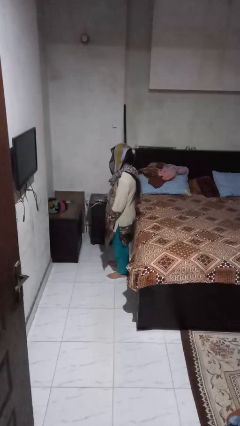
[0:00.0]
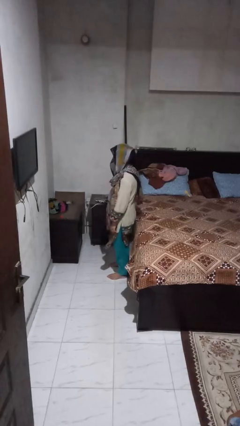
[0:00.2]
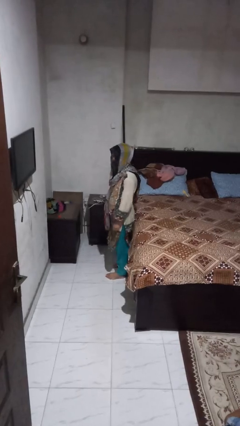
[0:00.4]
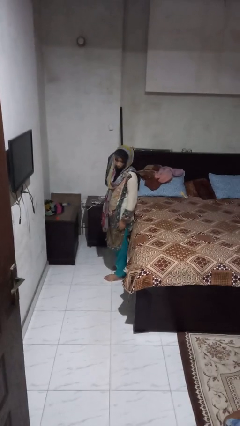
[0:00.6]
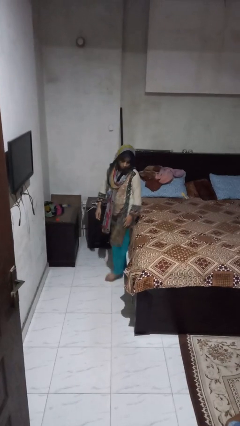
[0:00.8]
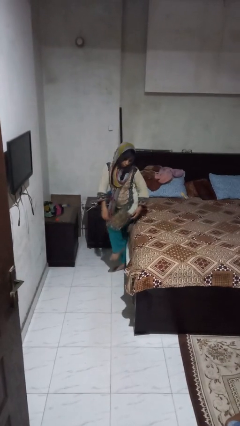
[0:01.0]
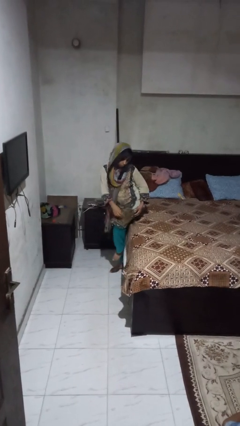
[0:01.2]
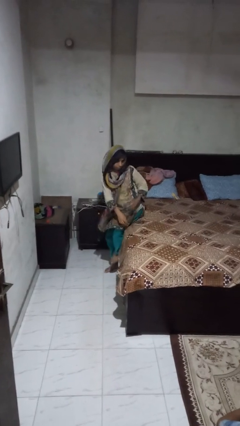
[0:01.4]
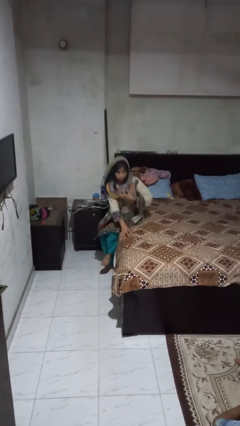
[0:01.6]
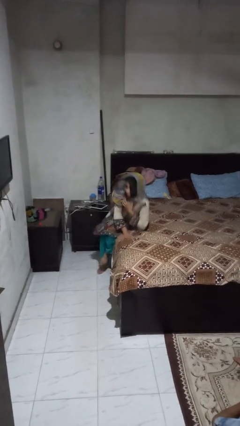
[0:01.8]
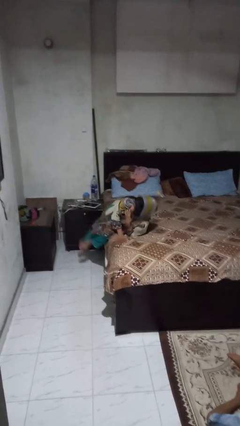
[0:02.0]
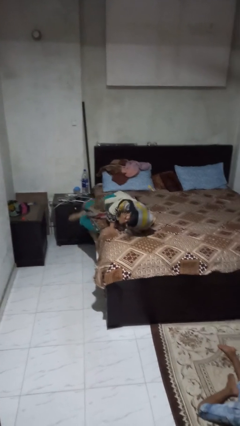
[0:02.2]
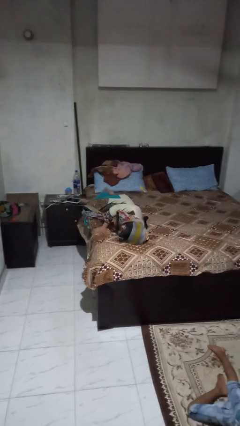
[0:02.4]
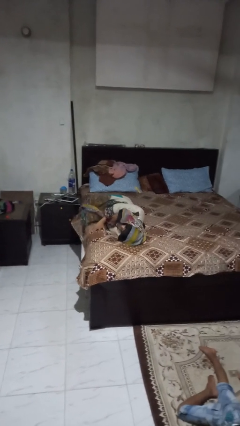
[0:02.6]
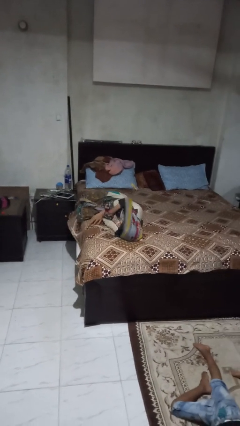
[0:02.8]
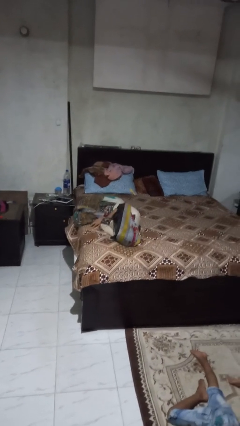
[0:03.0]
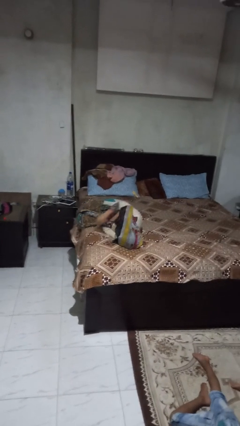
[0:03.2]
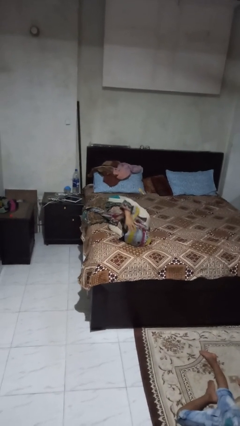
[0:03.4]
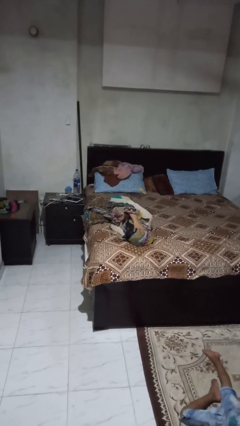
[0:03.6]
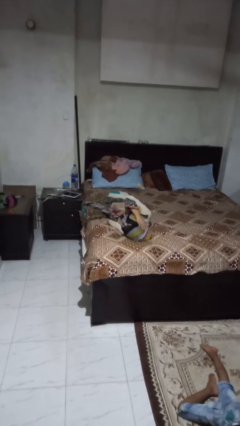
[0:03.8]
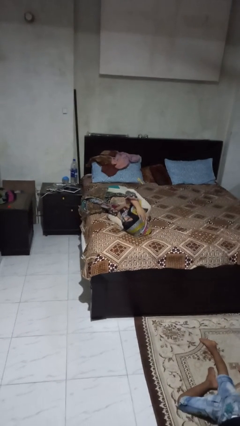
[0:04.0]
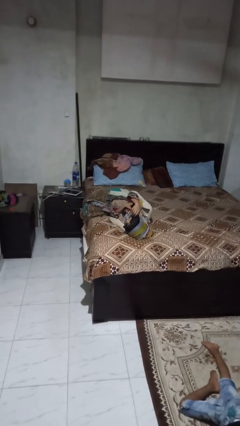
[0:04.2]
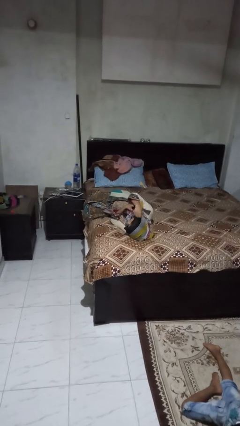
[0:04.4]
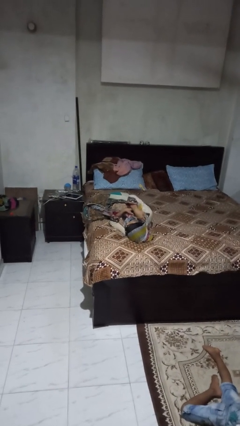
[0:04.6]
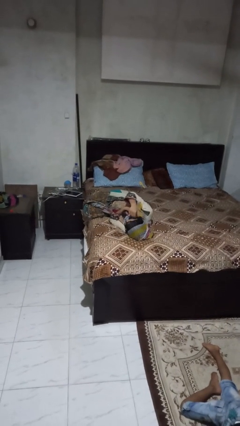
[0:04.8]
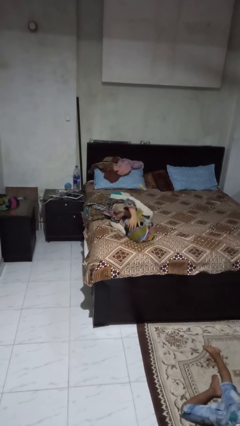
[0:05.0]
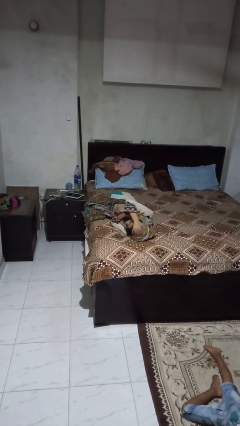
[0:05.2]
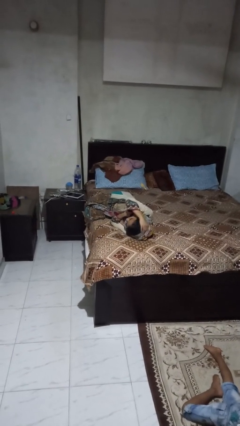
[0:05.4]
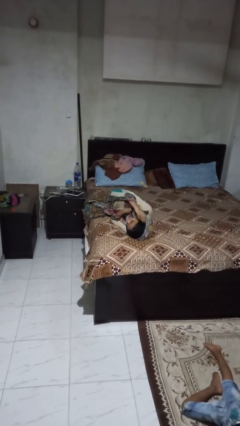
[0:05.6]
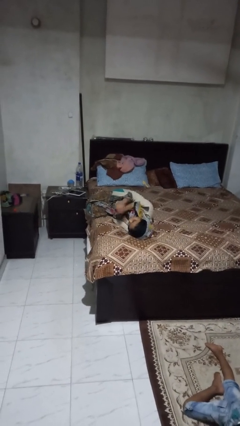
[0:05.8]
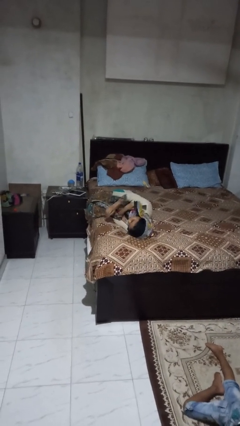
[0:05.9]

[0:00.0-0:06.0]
person lies down on bed

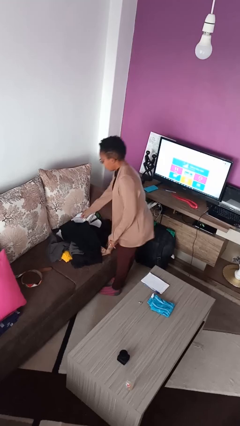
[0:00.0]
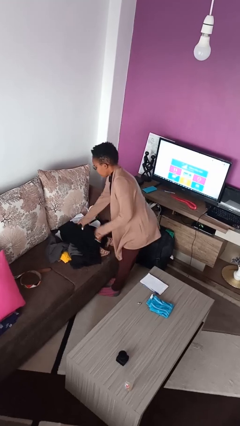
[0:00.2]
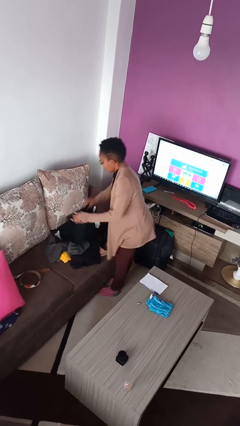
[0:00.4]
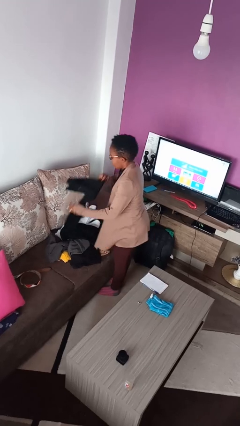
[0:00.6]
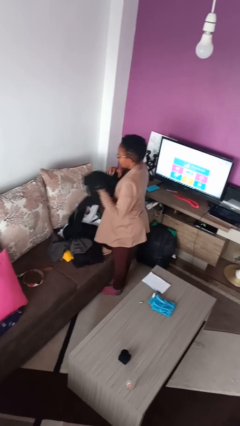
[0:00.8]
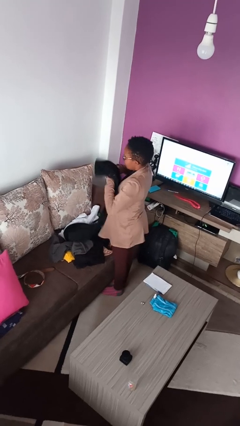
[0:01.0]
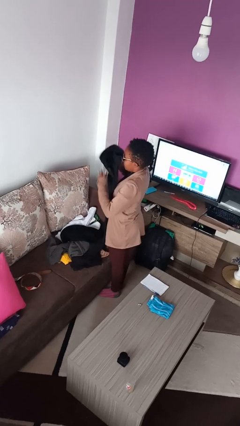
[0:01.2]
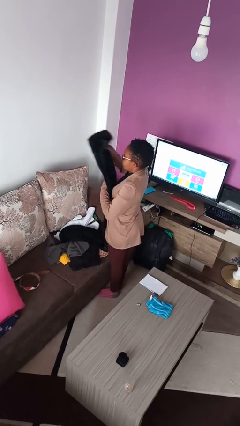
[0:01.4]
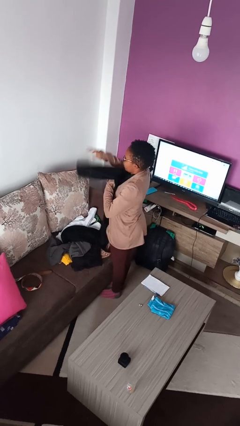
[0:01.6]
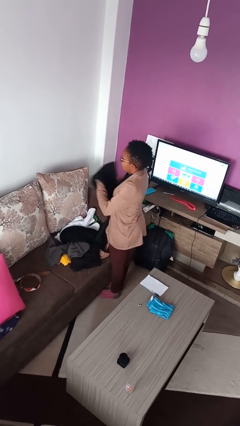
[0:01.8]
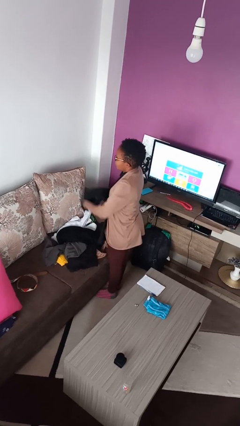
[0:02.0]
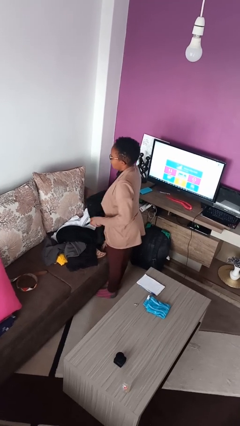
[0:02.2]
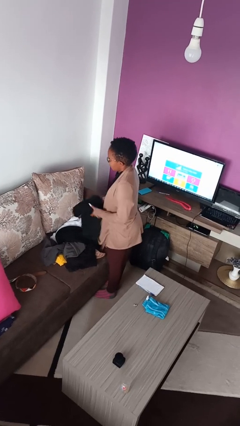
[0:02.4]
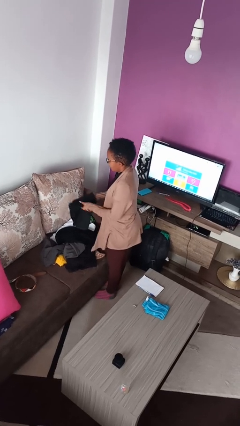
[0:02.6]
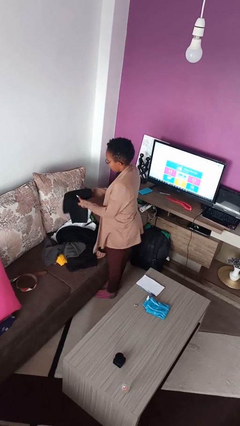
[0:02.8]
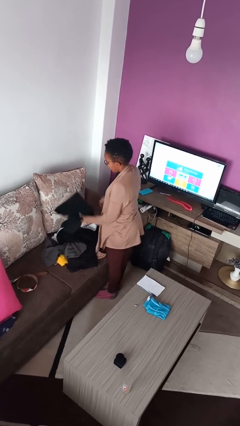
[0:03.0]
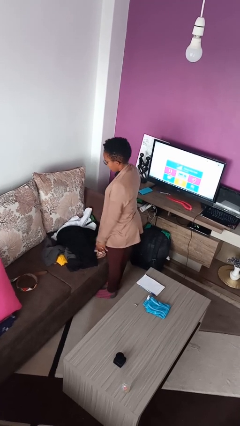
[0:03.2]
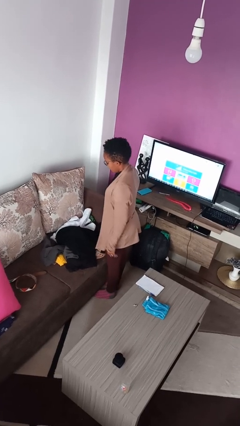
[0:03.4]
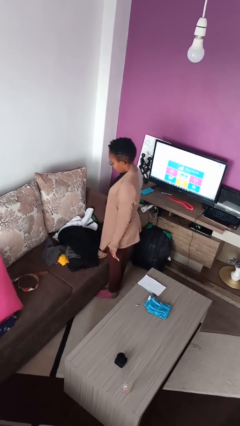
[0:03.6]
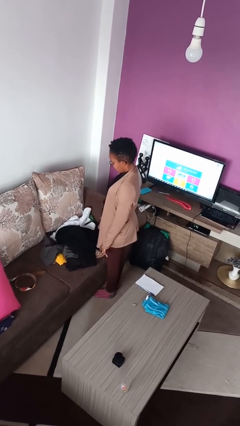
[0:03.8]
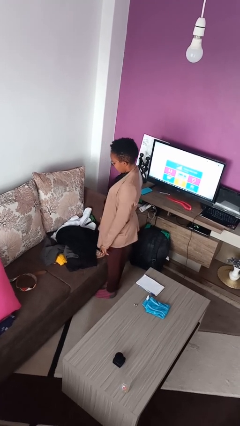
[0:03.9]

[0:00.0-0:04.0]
person folds pants

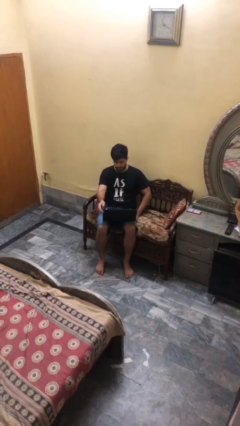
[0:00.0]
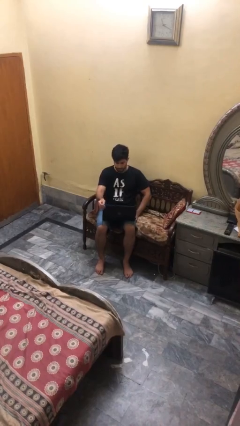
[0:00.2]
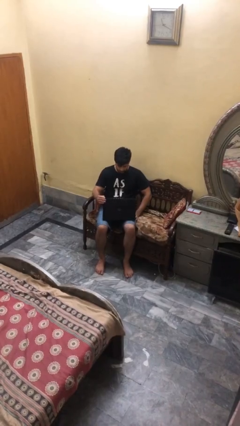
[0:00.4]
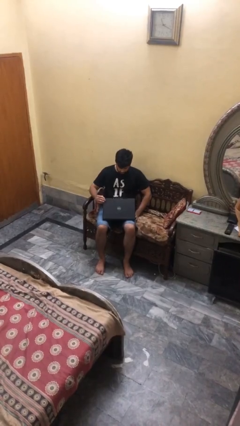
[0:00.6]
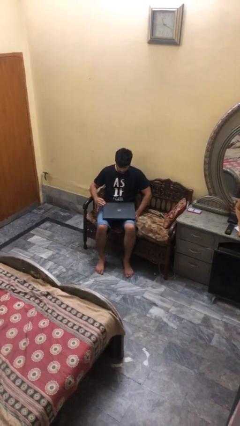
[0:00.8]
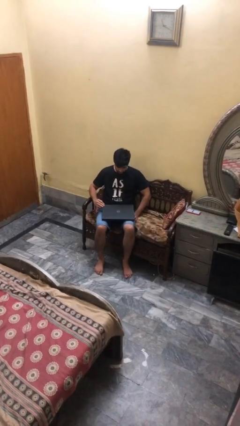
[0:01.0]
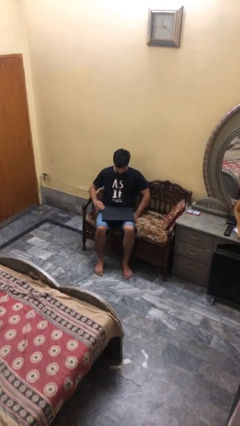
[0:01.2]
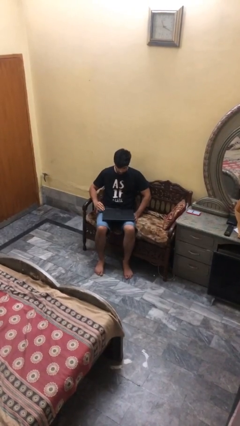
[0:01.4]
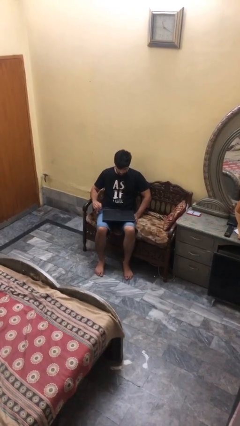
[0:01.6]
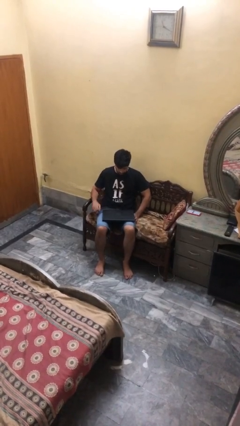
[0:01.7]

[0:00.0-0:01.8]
person closes laptop

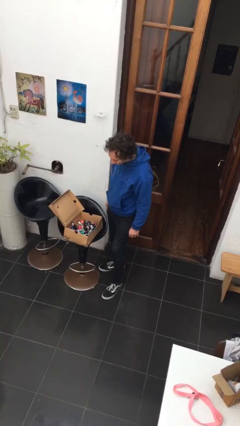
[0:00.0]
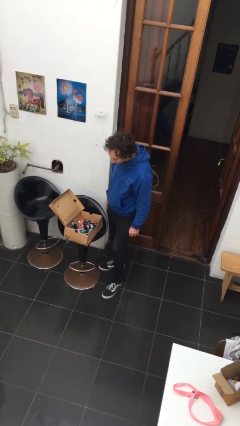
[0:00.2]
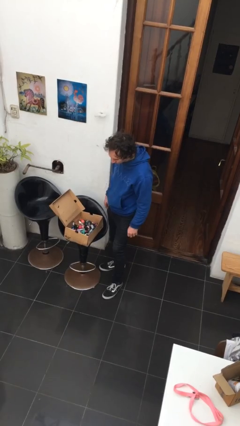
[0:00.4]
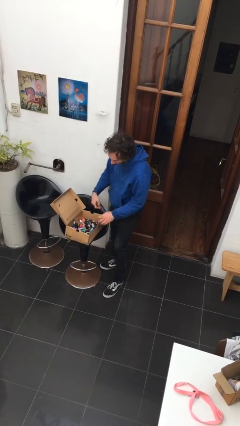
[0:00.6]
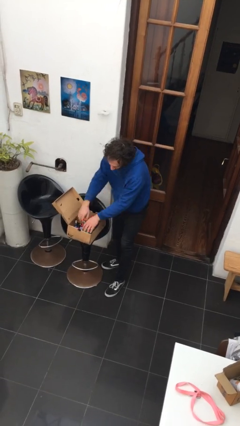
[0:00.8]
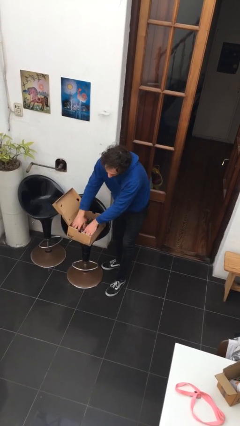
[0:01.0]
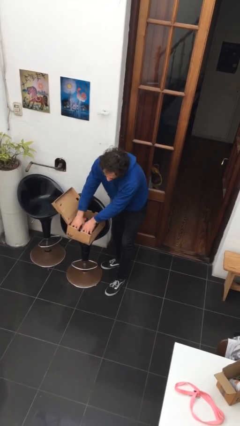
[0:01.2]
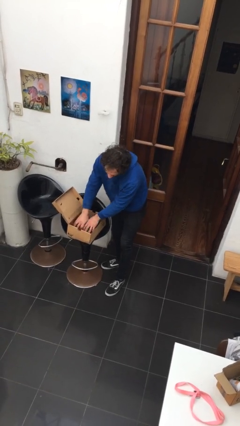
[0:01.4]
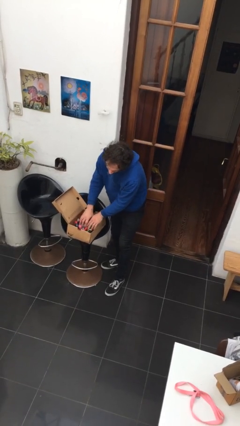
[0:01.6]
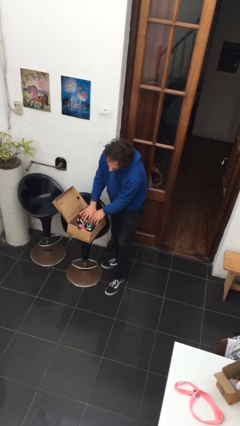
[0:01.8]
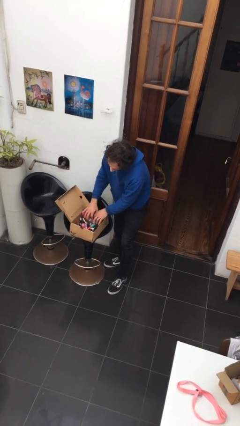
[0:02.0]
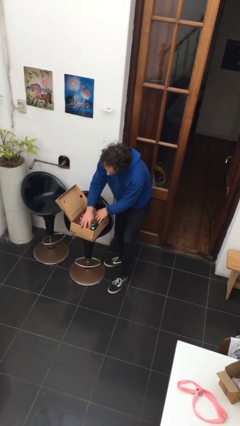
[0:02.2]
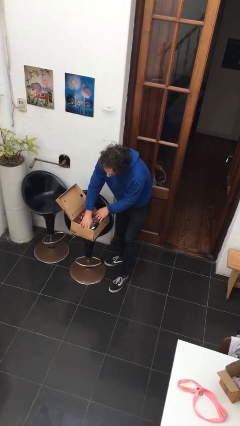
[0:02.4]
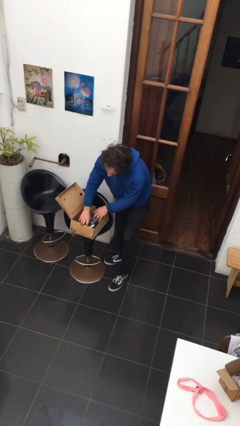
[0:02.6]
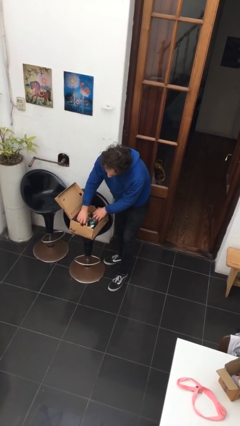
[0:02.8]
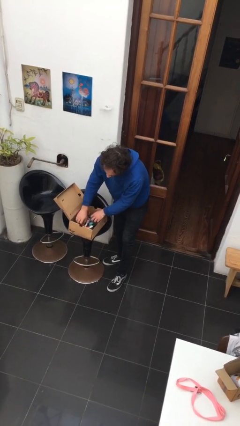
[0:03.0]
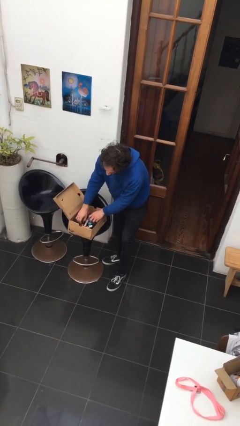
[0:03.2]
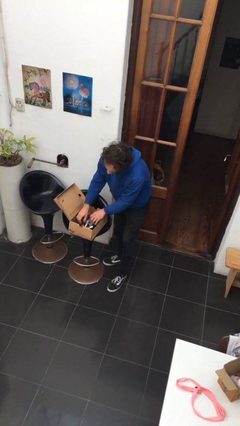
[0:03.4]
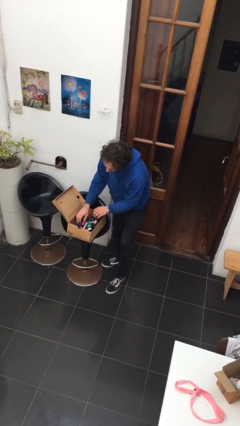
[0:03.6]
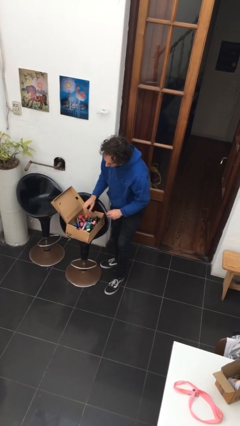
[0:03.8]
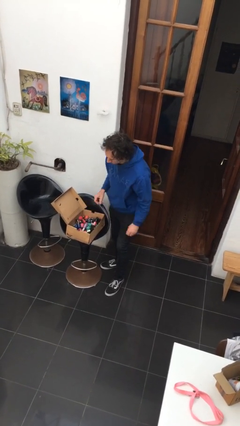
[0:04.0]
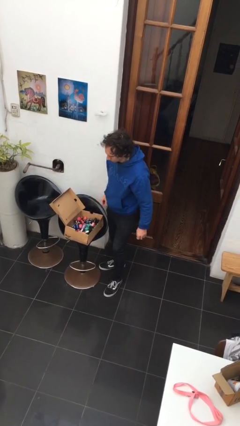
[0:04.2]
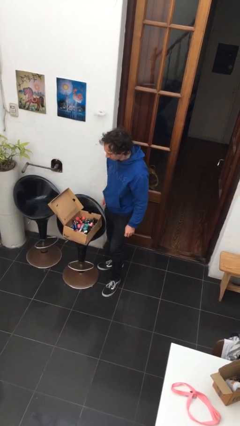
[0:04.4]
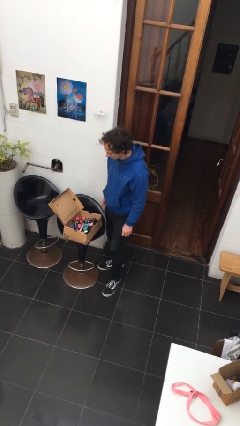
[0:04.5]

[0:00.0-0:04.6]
person searches in box

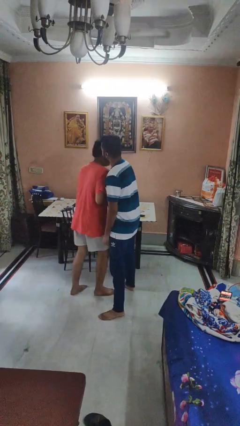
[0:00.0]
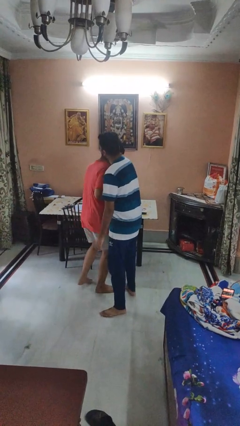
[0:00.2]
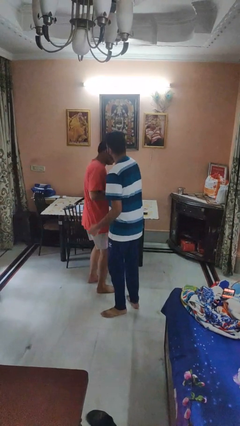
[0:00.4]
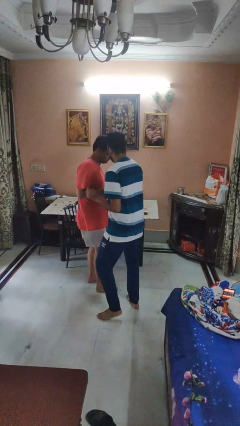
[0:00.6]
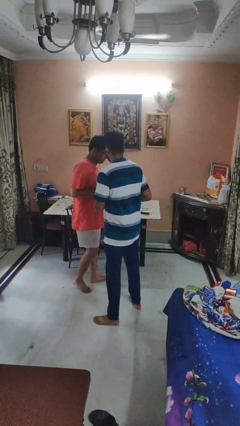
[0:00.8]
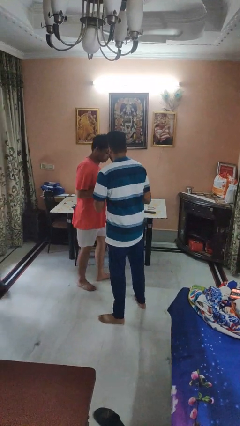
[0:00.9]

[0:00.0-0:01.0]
person bumps into person
